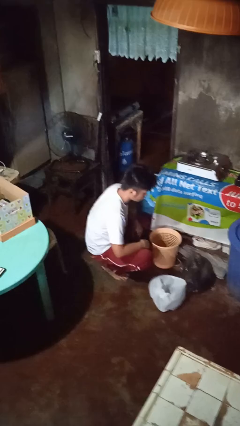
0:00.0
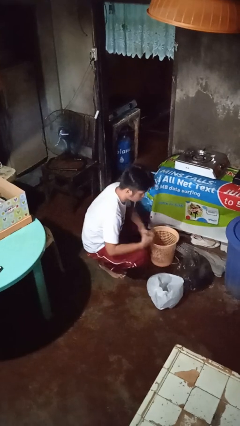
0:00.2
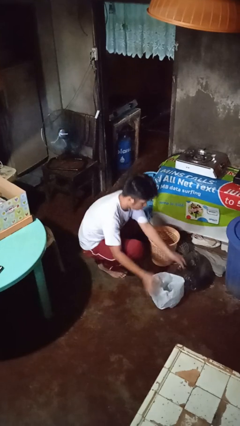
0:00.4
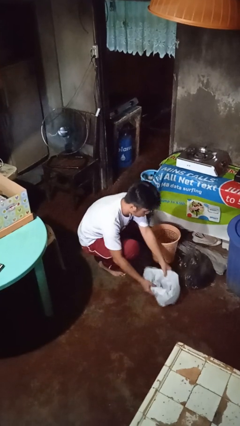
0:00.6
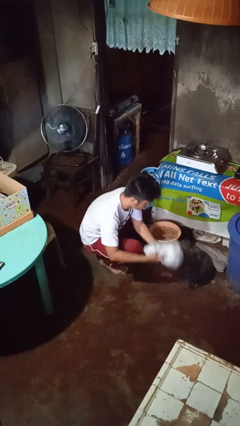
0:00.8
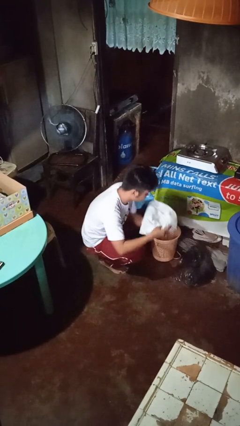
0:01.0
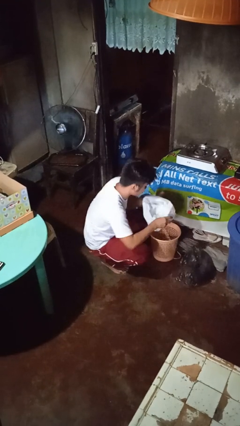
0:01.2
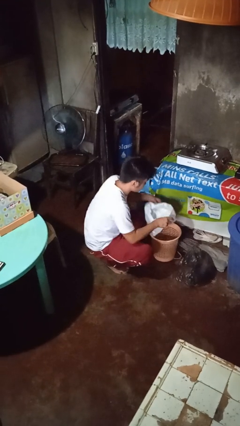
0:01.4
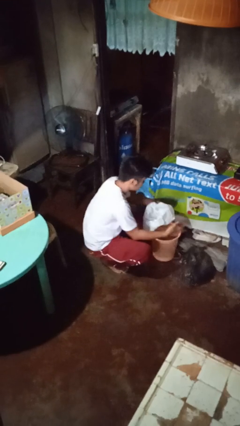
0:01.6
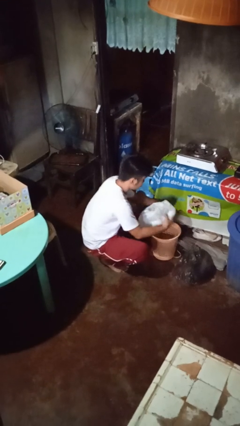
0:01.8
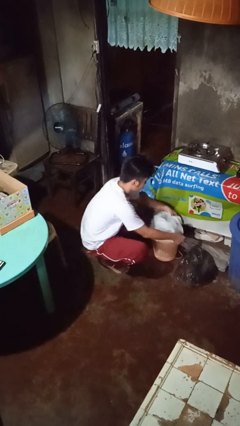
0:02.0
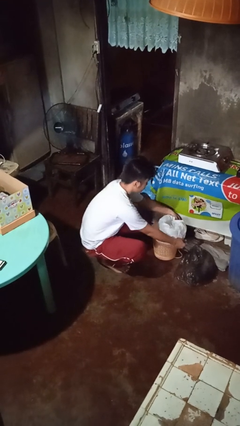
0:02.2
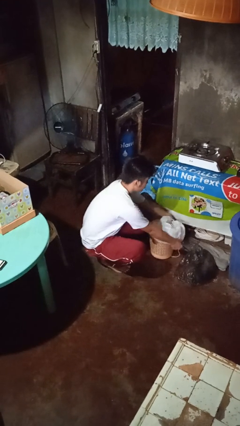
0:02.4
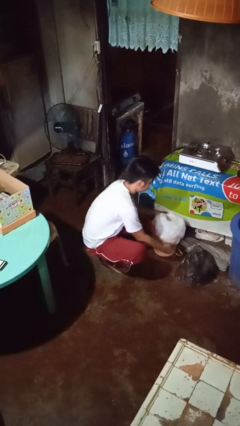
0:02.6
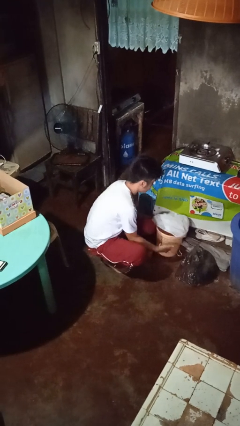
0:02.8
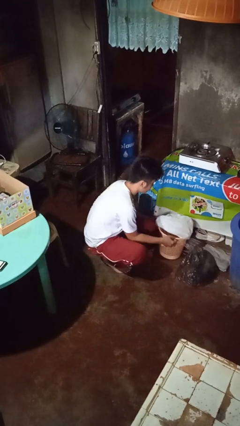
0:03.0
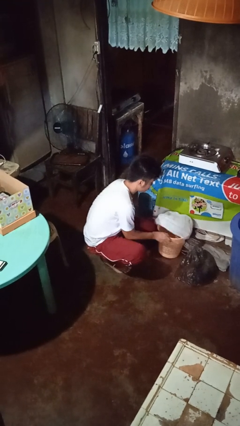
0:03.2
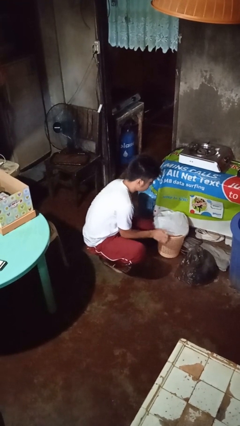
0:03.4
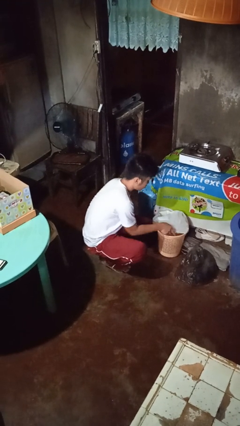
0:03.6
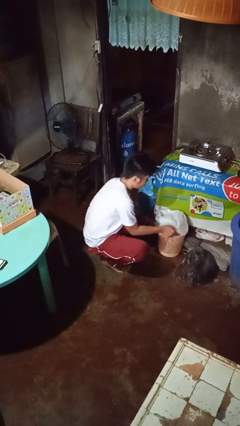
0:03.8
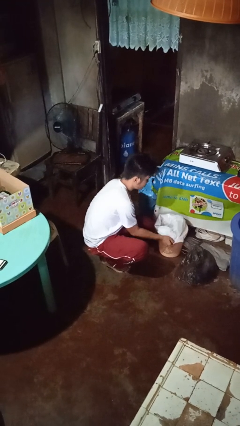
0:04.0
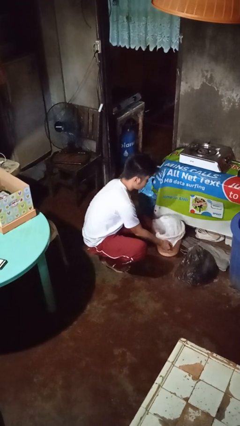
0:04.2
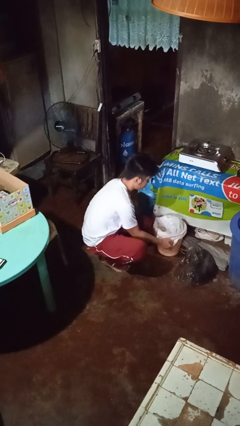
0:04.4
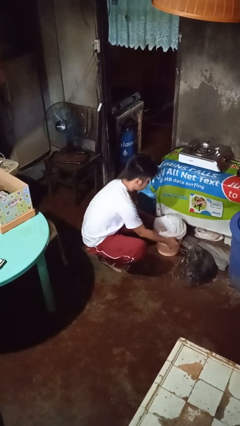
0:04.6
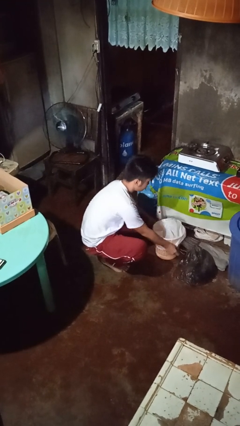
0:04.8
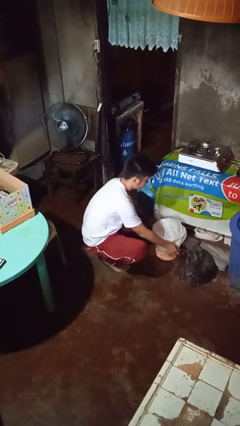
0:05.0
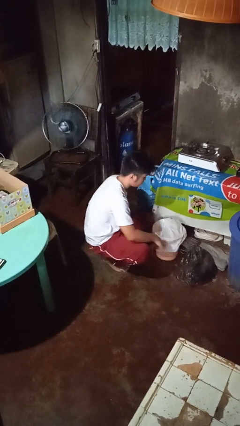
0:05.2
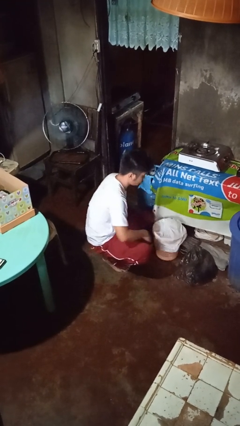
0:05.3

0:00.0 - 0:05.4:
person inserts trashbag into trashcan

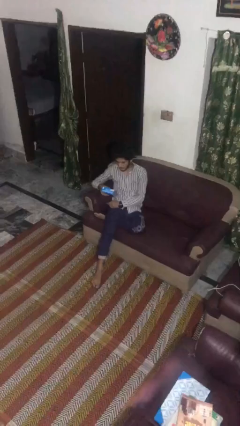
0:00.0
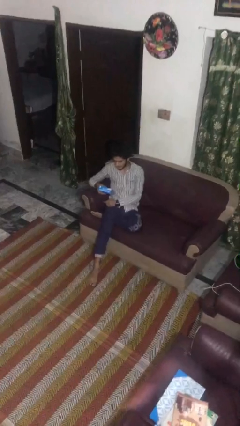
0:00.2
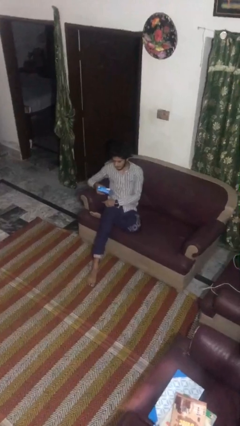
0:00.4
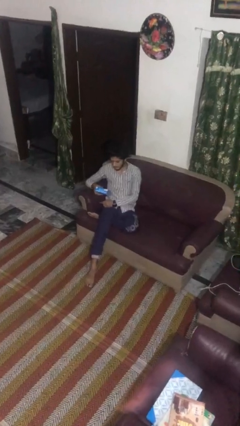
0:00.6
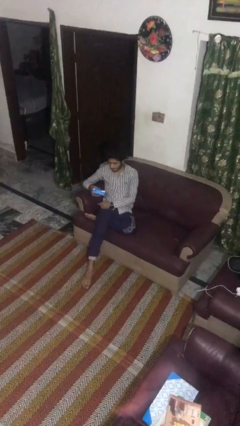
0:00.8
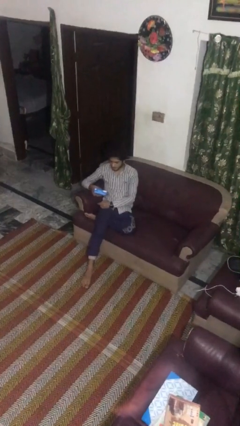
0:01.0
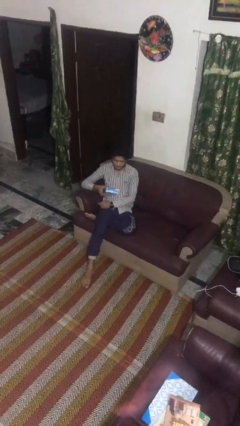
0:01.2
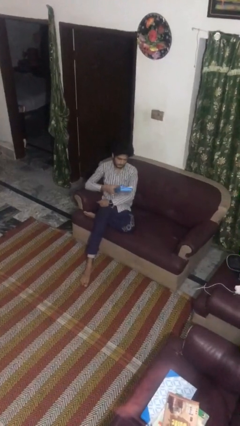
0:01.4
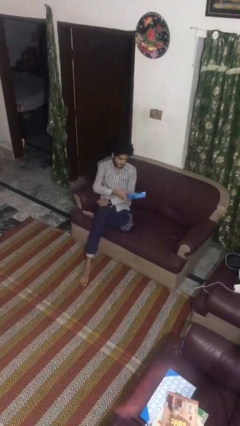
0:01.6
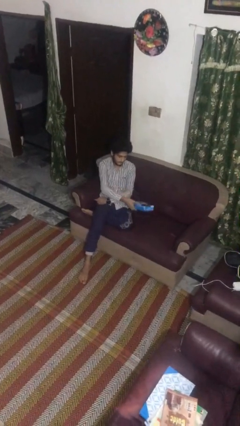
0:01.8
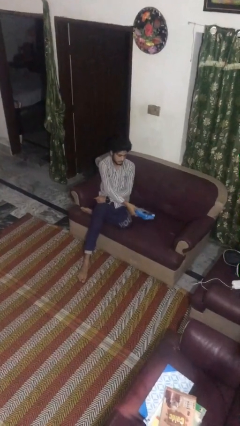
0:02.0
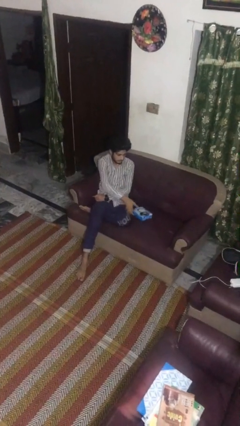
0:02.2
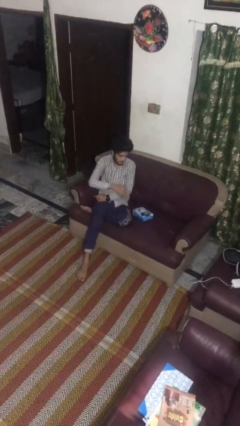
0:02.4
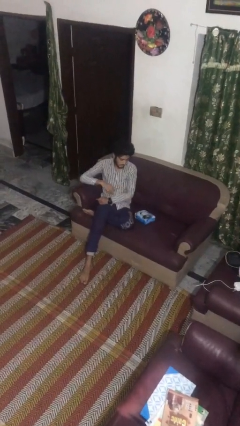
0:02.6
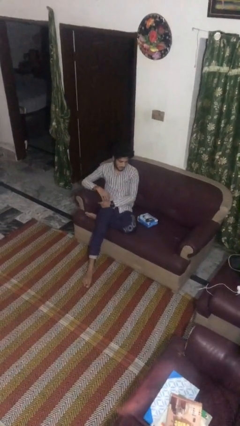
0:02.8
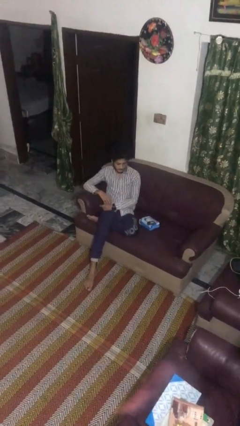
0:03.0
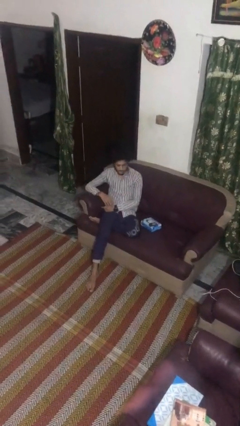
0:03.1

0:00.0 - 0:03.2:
person puts down object on couch

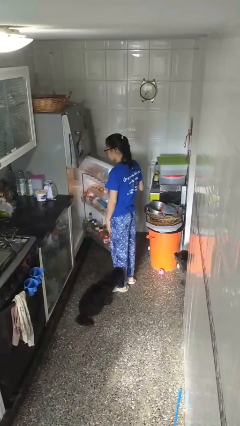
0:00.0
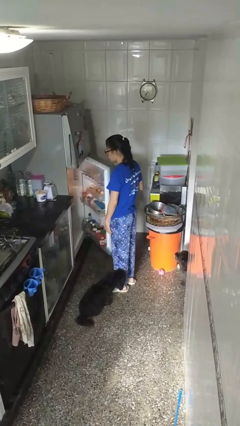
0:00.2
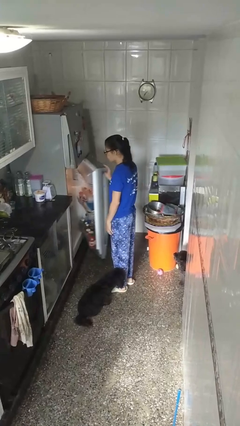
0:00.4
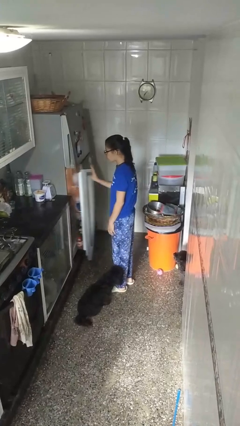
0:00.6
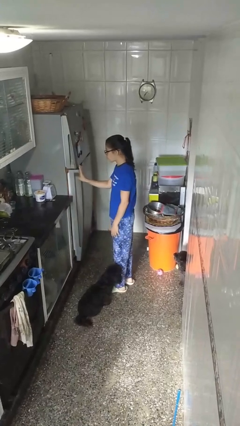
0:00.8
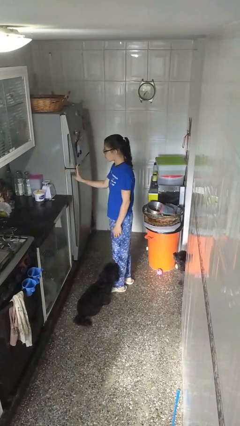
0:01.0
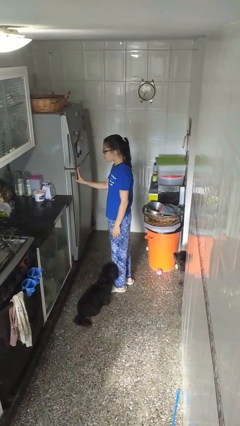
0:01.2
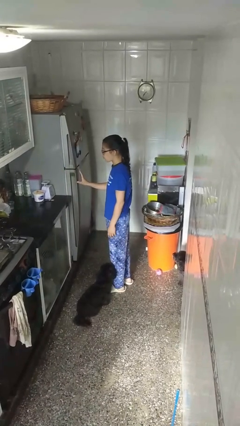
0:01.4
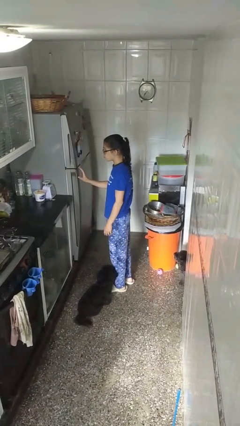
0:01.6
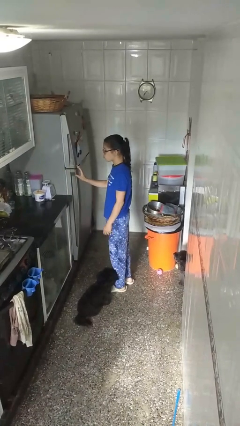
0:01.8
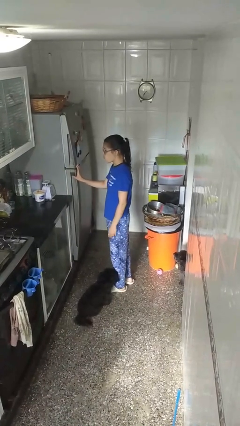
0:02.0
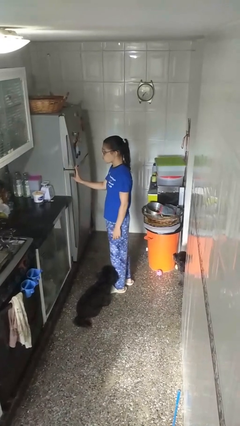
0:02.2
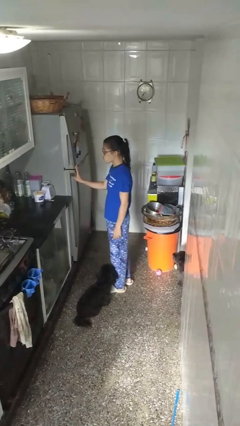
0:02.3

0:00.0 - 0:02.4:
person closes refrigerator

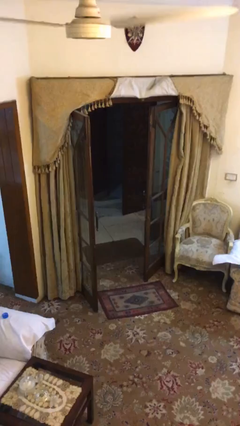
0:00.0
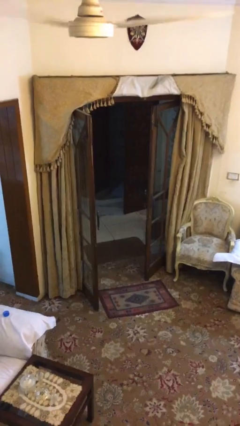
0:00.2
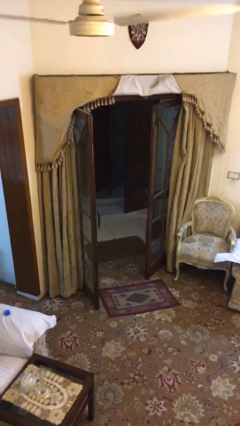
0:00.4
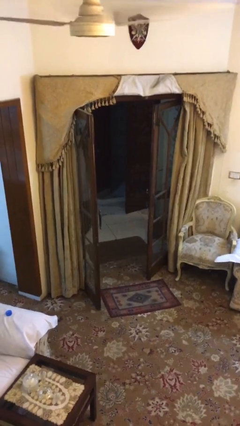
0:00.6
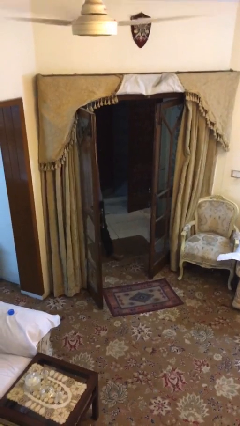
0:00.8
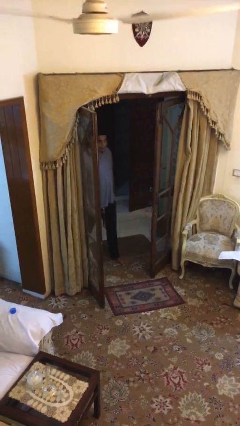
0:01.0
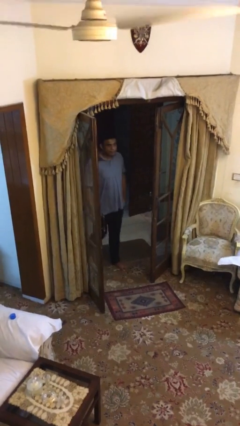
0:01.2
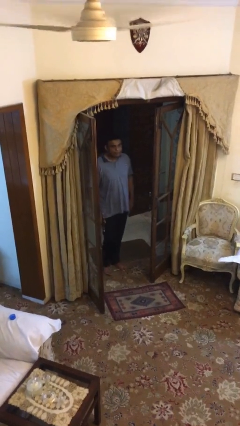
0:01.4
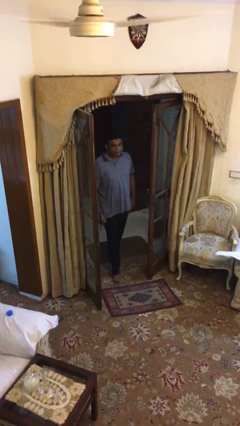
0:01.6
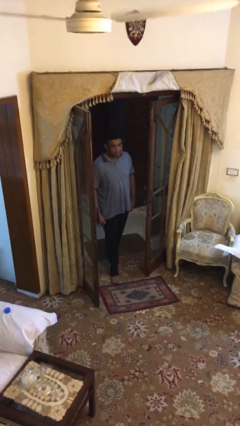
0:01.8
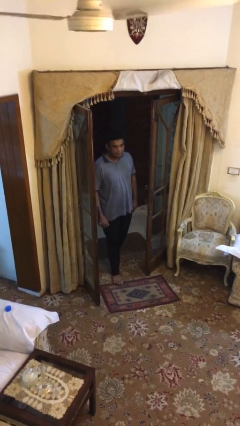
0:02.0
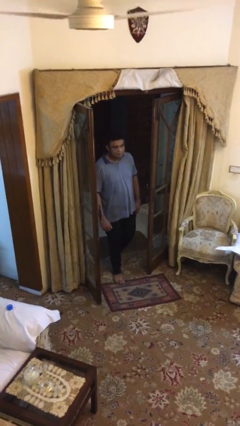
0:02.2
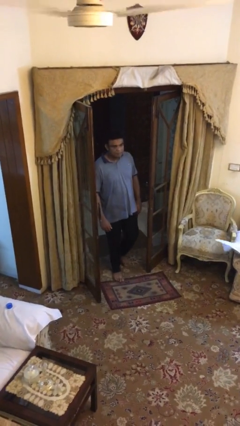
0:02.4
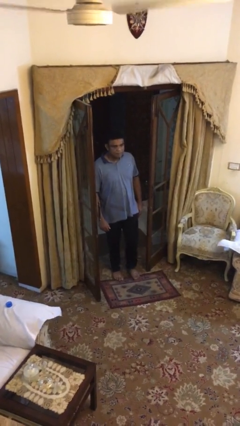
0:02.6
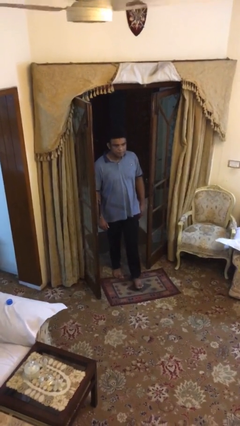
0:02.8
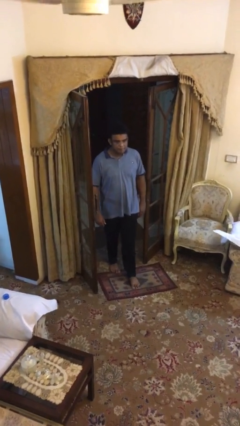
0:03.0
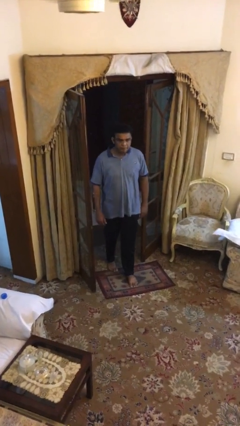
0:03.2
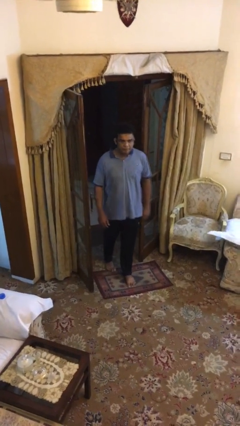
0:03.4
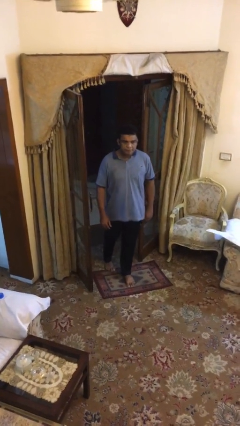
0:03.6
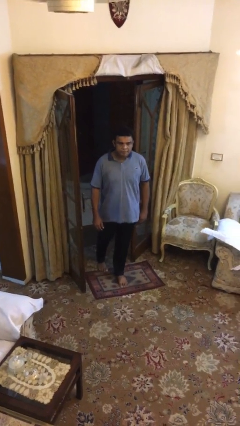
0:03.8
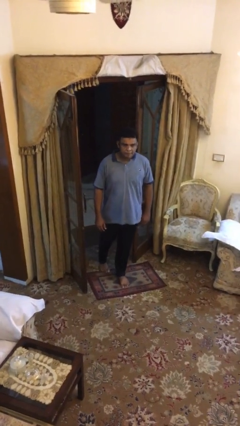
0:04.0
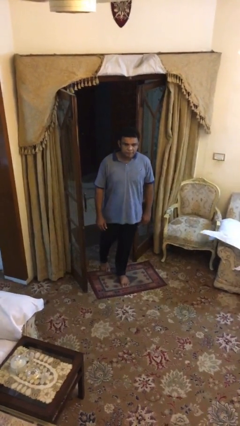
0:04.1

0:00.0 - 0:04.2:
person enters scene through structure

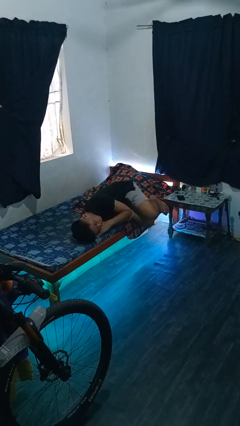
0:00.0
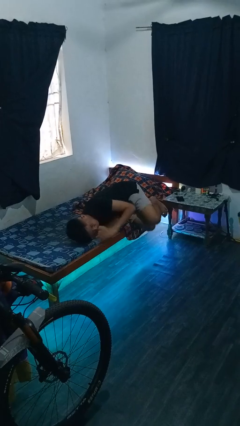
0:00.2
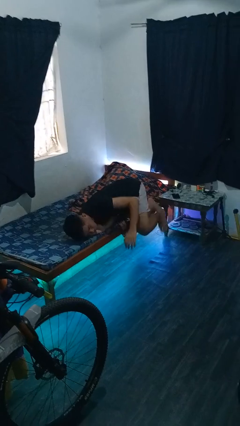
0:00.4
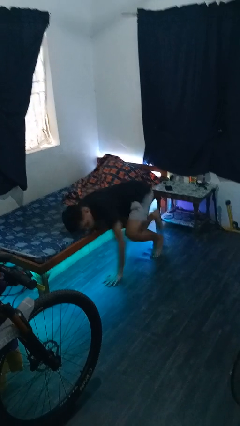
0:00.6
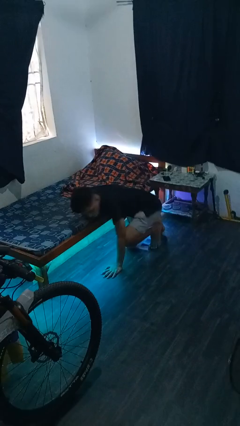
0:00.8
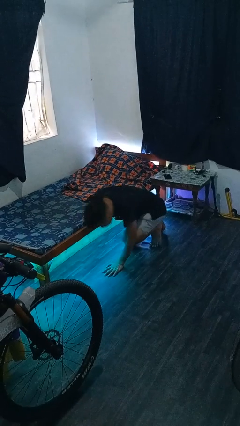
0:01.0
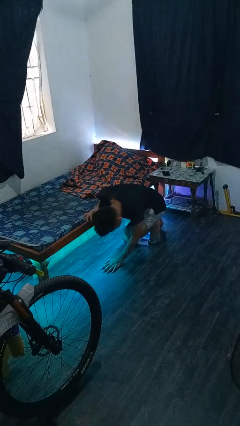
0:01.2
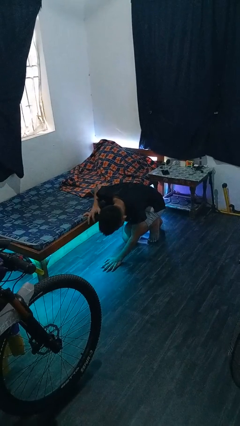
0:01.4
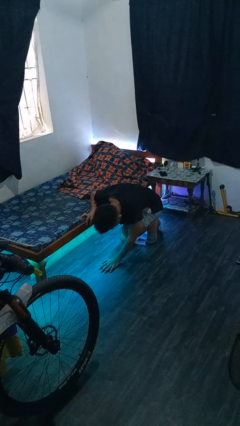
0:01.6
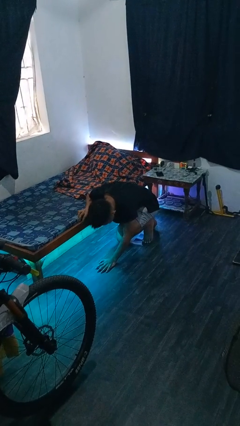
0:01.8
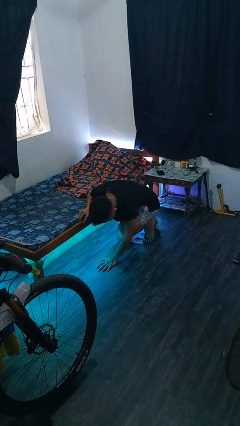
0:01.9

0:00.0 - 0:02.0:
person falls from bed

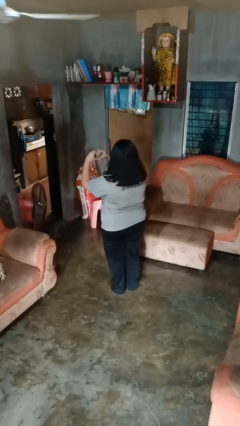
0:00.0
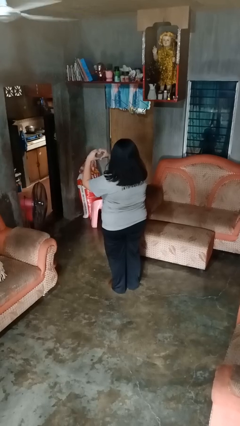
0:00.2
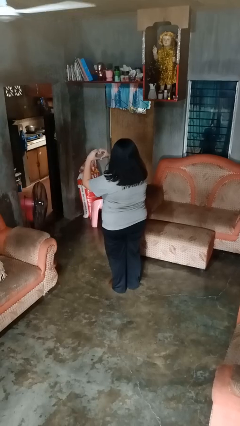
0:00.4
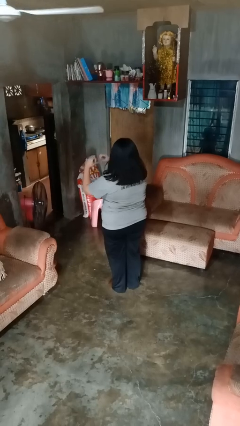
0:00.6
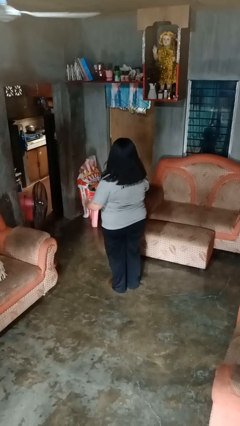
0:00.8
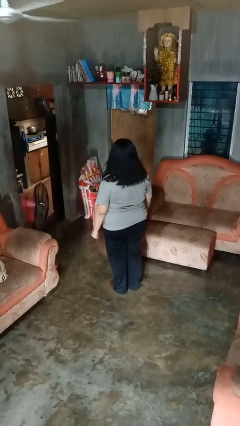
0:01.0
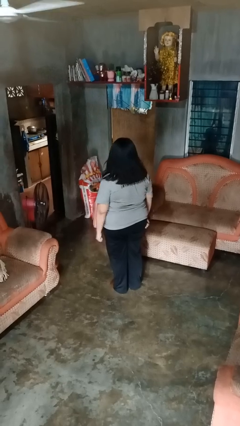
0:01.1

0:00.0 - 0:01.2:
person gestures heart
